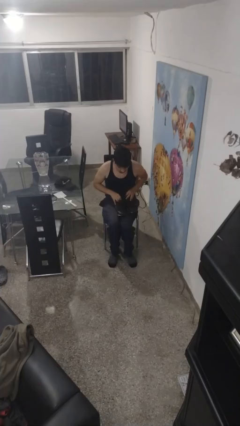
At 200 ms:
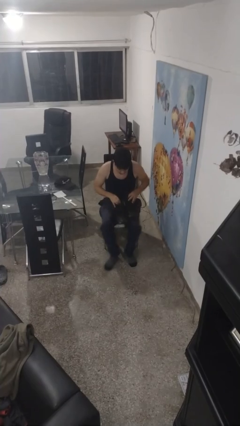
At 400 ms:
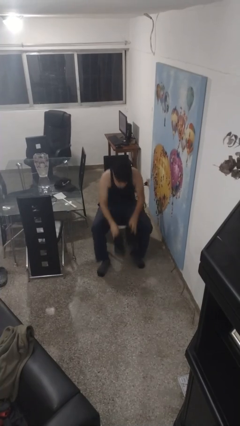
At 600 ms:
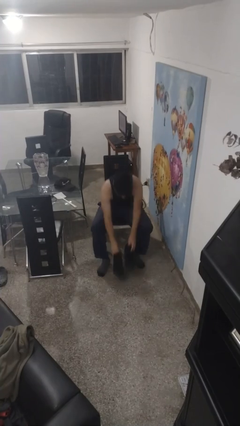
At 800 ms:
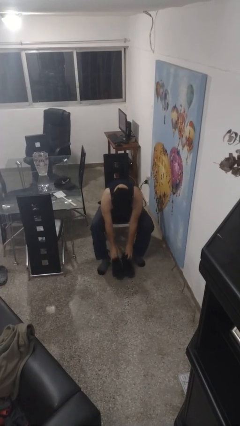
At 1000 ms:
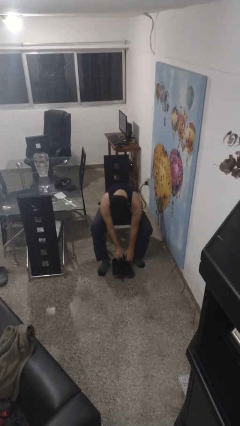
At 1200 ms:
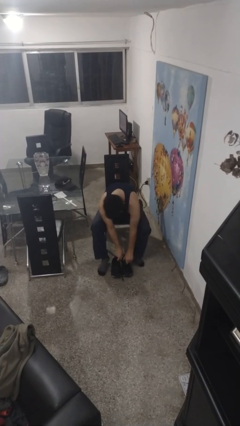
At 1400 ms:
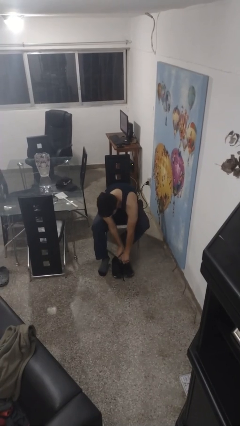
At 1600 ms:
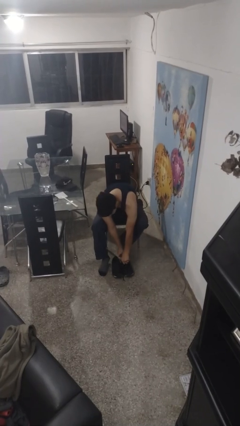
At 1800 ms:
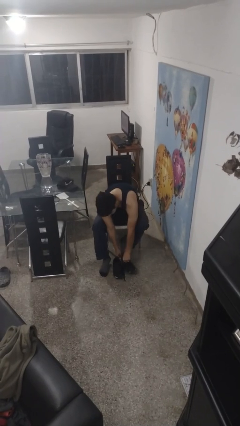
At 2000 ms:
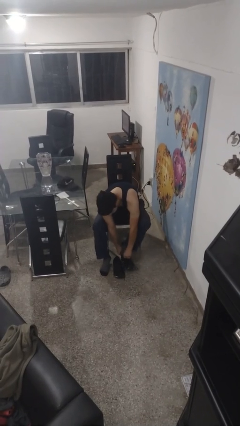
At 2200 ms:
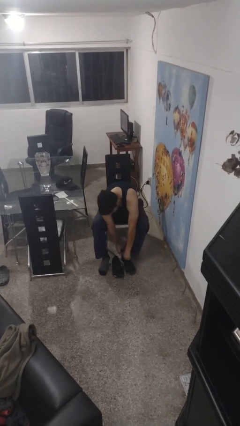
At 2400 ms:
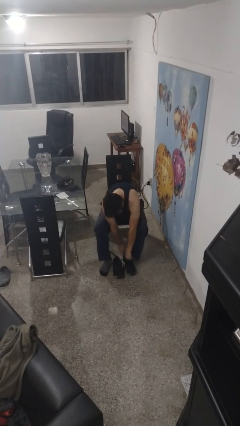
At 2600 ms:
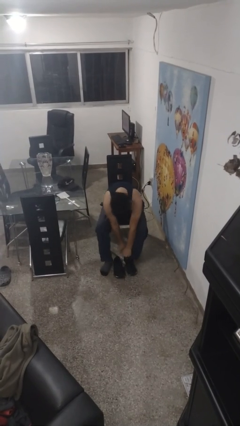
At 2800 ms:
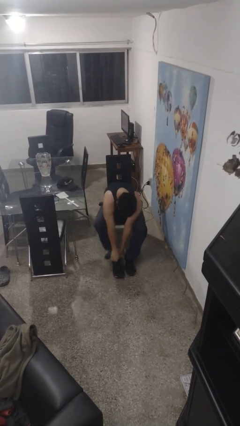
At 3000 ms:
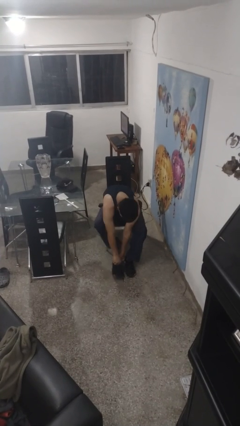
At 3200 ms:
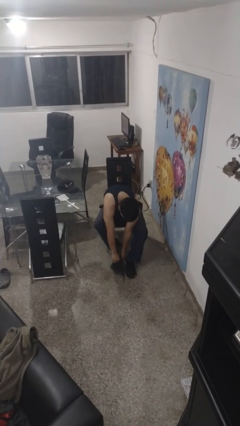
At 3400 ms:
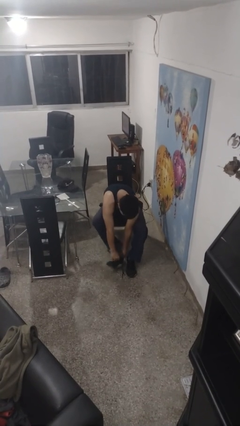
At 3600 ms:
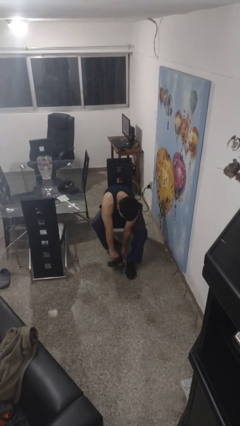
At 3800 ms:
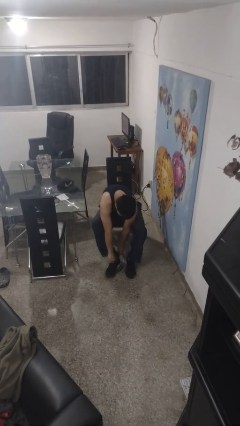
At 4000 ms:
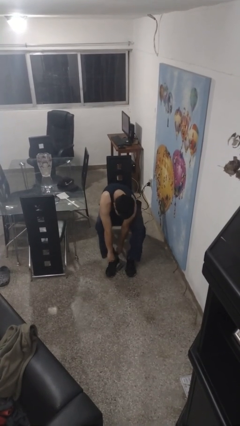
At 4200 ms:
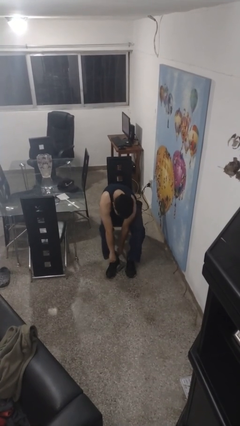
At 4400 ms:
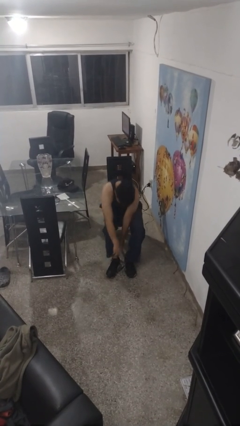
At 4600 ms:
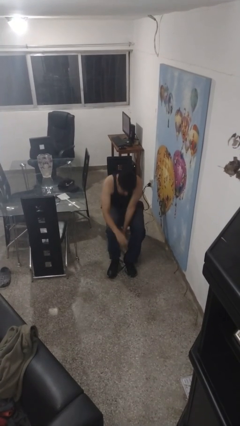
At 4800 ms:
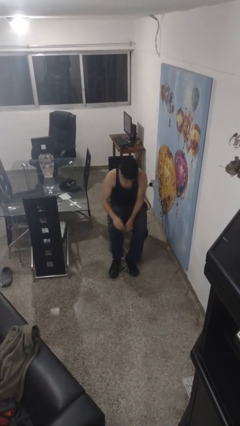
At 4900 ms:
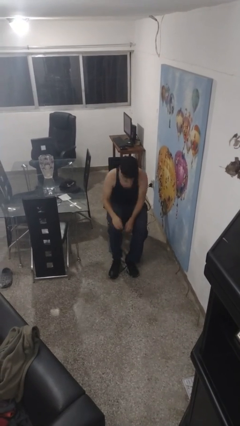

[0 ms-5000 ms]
person puts on shoes

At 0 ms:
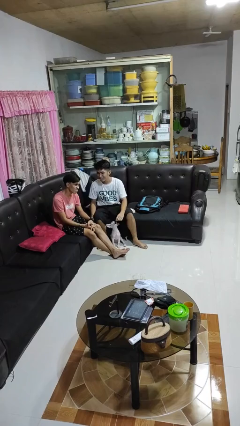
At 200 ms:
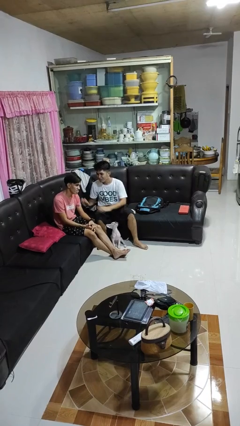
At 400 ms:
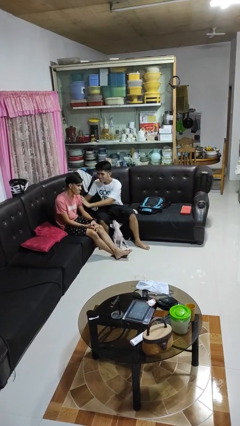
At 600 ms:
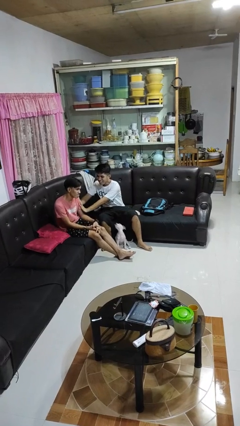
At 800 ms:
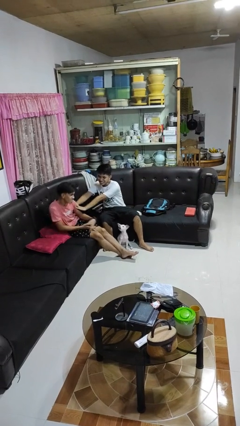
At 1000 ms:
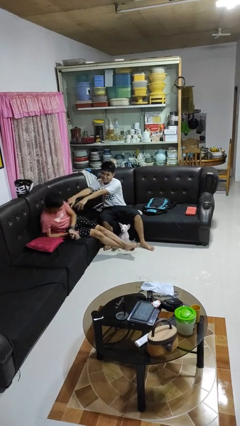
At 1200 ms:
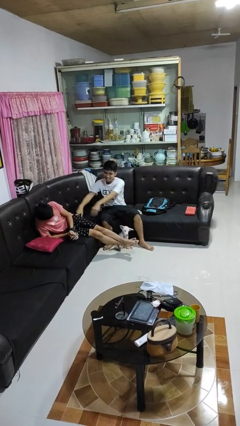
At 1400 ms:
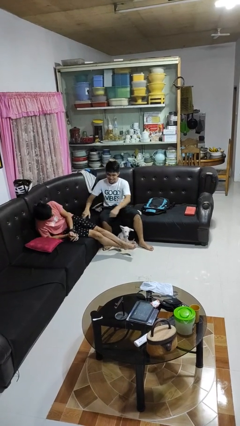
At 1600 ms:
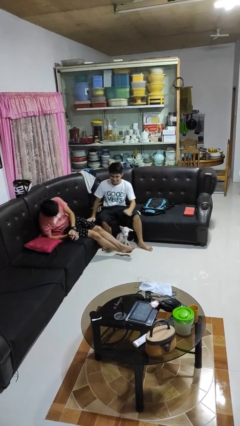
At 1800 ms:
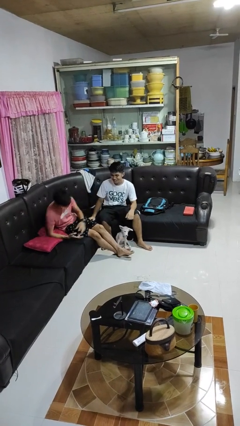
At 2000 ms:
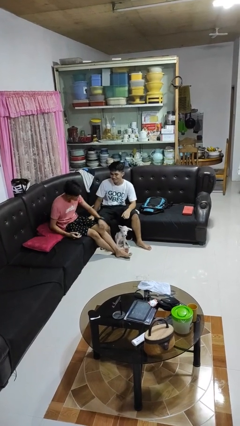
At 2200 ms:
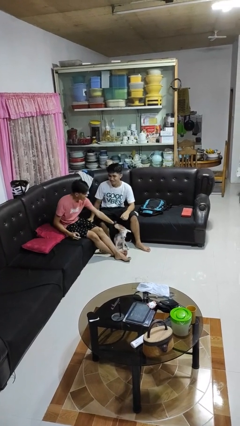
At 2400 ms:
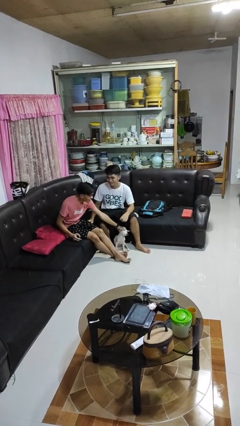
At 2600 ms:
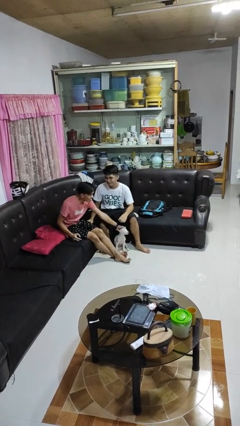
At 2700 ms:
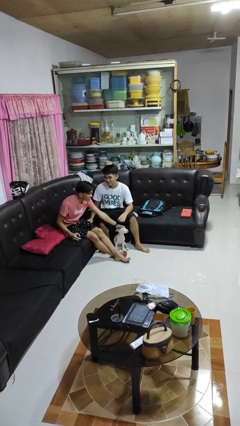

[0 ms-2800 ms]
person shoves person

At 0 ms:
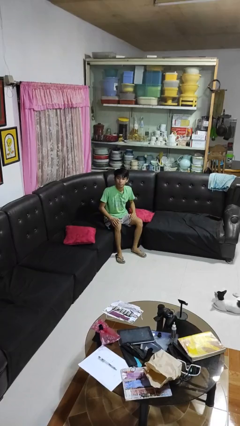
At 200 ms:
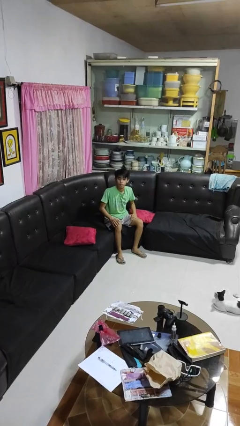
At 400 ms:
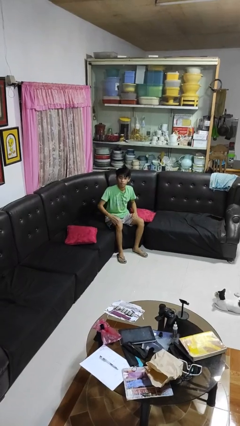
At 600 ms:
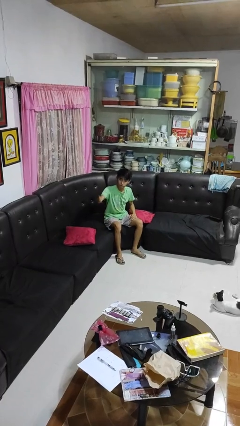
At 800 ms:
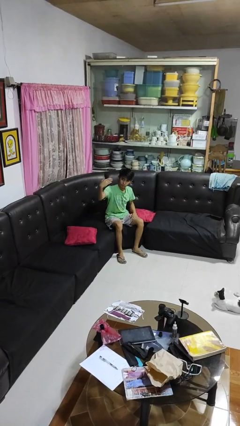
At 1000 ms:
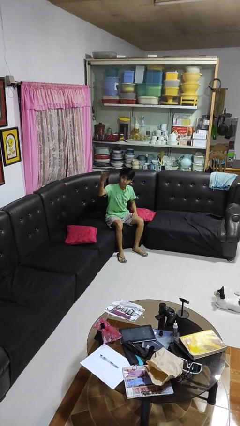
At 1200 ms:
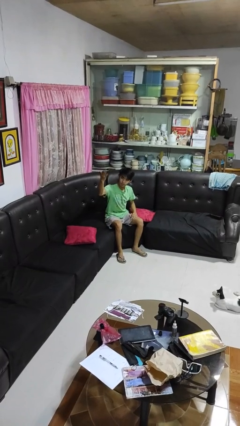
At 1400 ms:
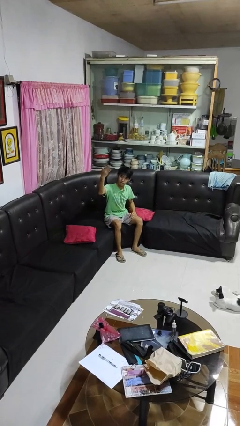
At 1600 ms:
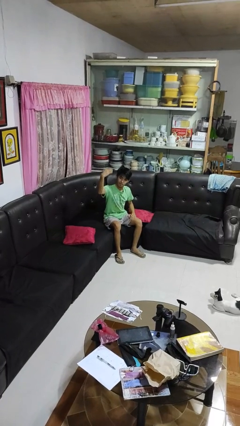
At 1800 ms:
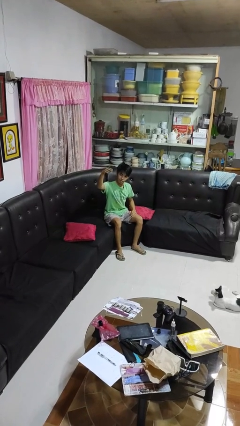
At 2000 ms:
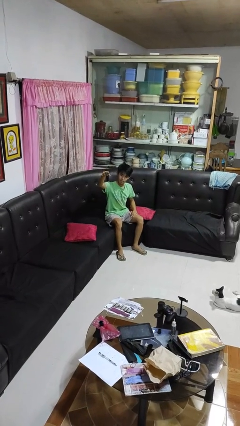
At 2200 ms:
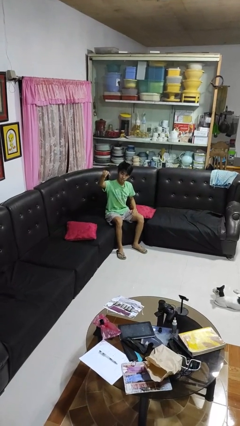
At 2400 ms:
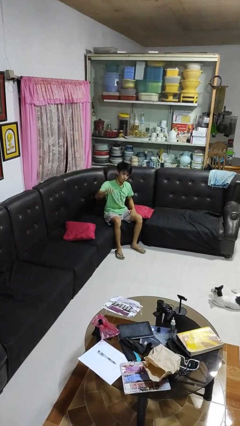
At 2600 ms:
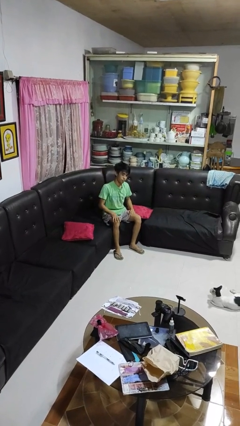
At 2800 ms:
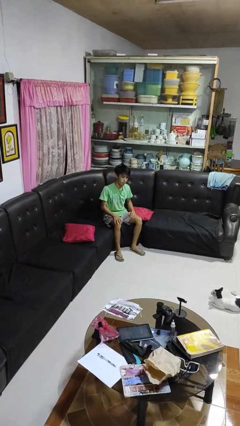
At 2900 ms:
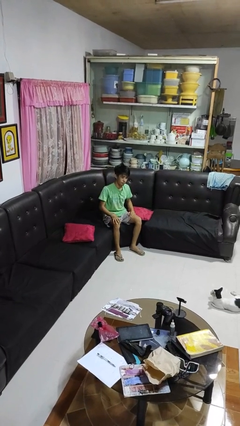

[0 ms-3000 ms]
person gestures come here

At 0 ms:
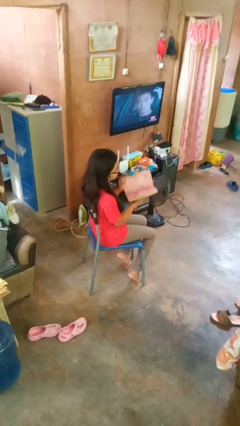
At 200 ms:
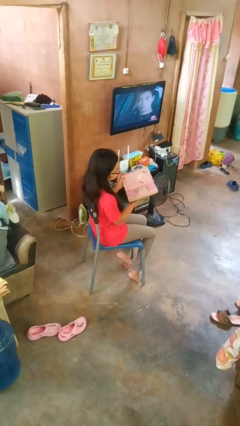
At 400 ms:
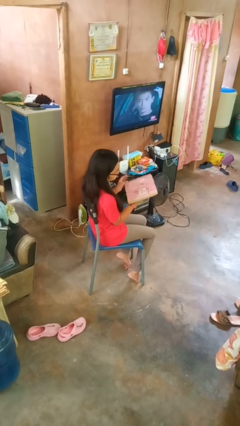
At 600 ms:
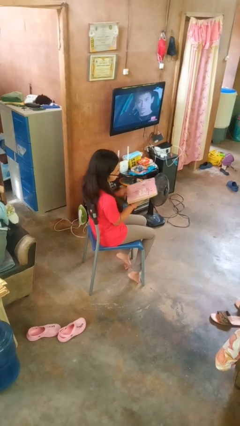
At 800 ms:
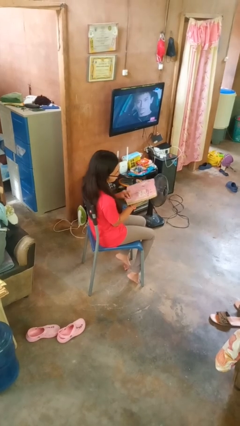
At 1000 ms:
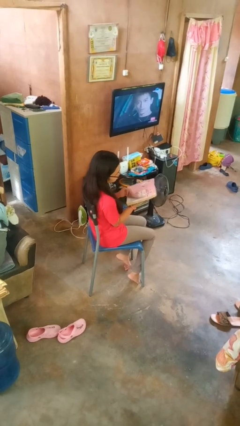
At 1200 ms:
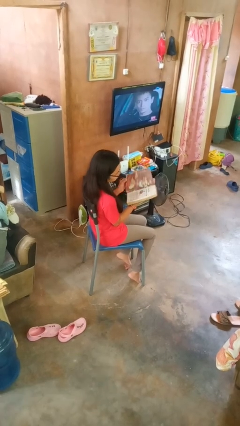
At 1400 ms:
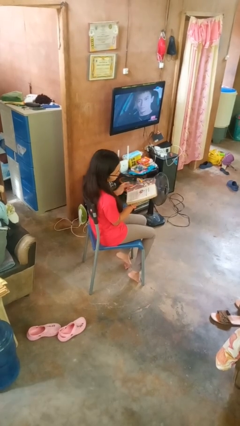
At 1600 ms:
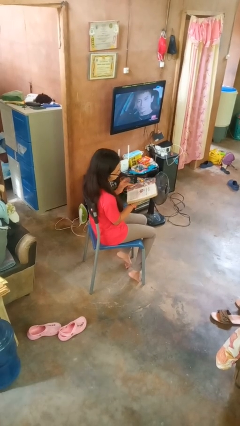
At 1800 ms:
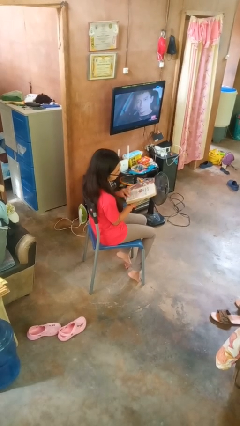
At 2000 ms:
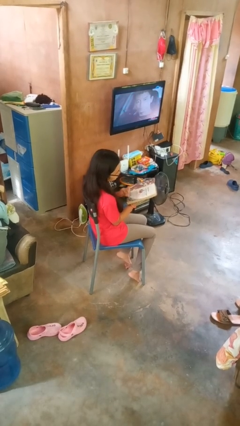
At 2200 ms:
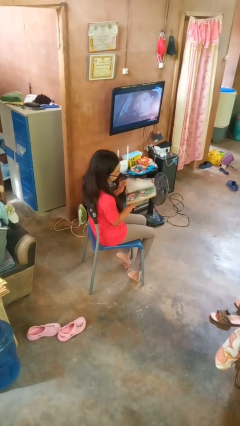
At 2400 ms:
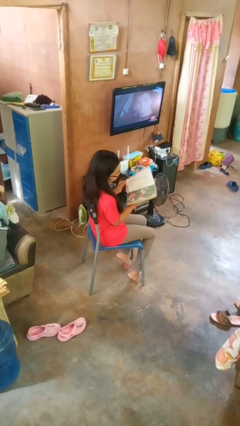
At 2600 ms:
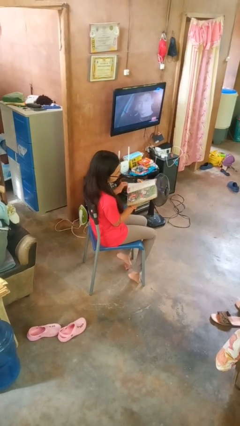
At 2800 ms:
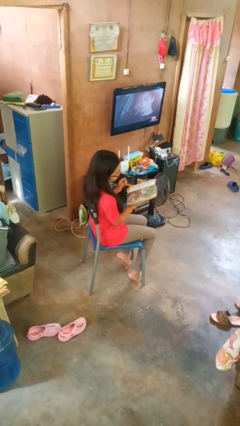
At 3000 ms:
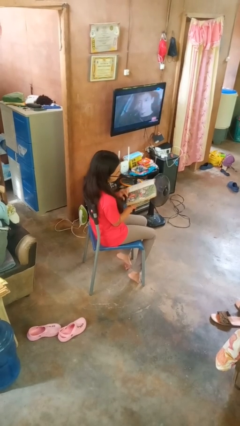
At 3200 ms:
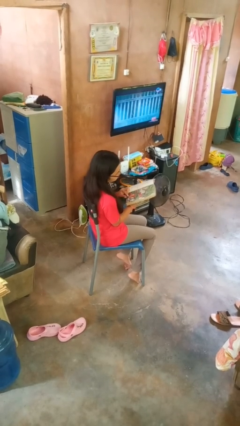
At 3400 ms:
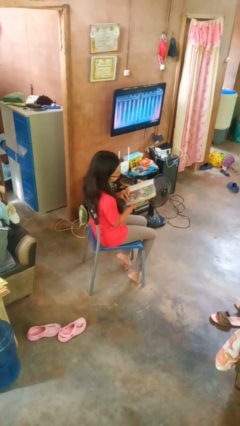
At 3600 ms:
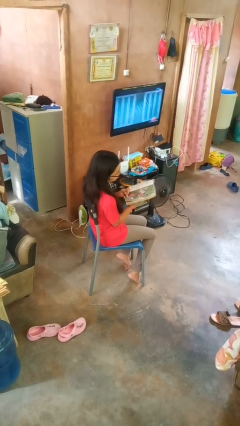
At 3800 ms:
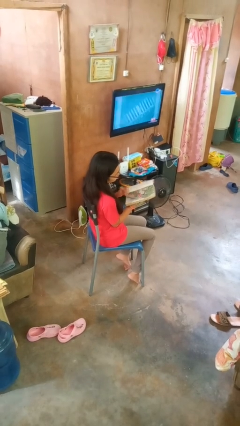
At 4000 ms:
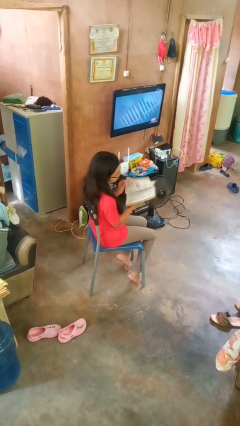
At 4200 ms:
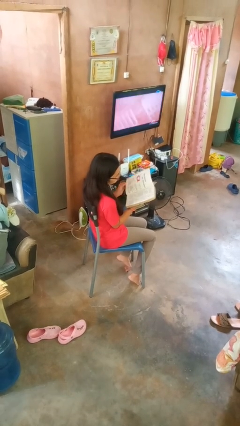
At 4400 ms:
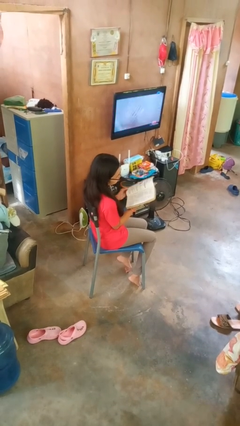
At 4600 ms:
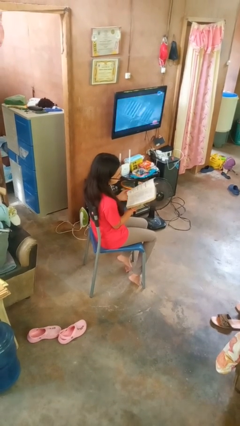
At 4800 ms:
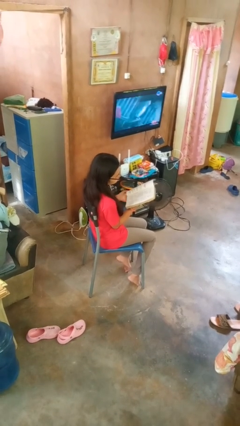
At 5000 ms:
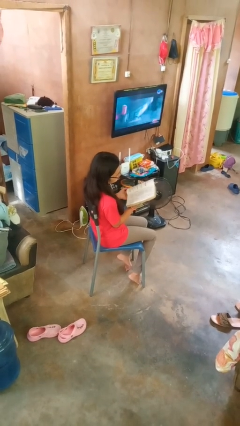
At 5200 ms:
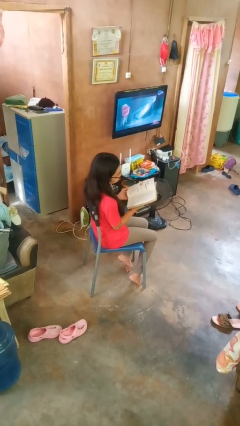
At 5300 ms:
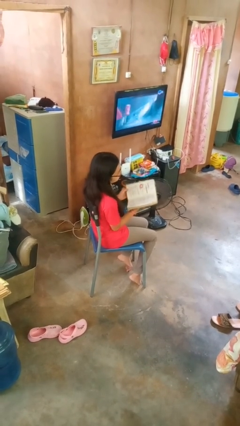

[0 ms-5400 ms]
person reads book

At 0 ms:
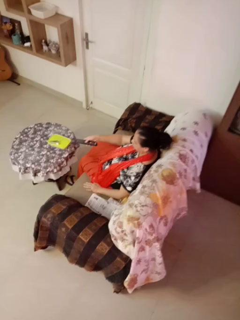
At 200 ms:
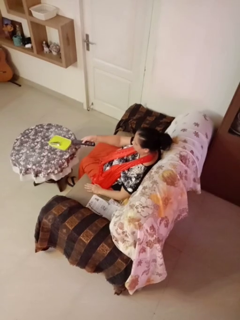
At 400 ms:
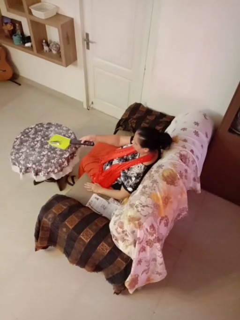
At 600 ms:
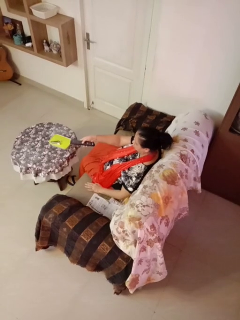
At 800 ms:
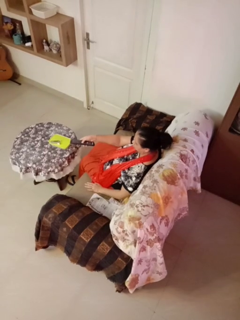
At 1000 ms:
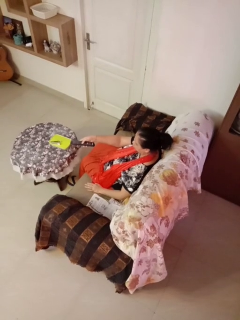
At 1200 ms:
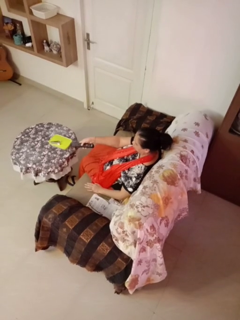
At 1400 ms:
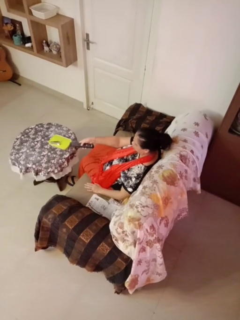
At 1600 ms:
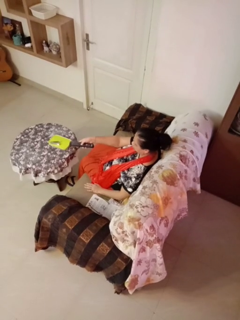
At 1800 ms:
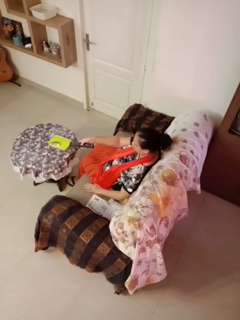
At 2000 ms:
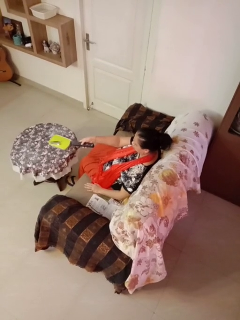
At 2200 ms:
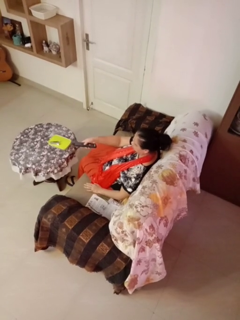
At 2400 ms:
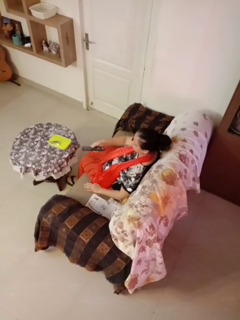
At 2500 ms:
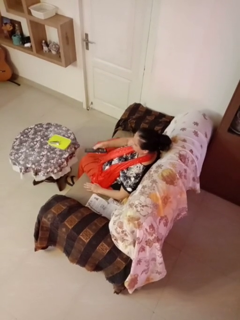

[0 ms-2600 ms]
person uses television remote
